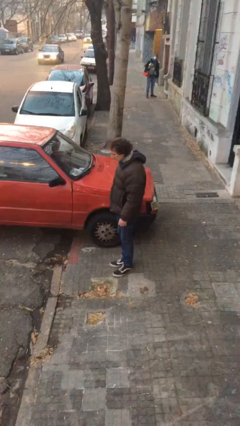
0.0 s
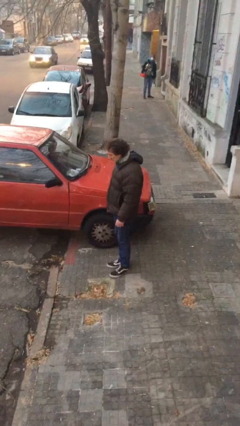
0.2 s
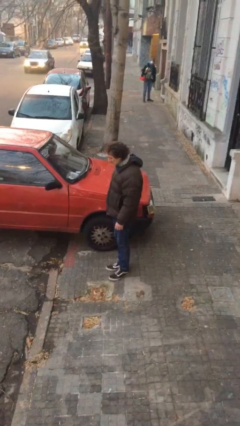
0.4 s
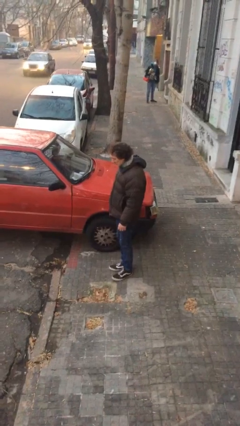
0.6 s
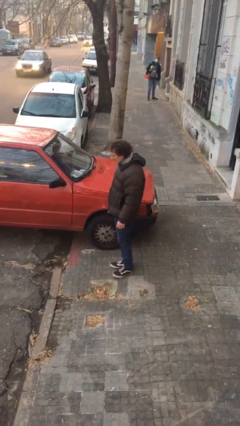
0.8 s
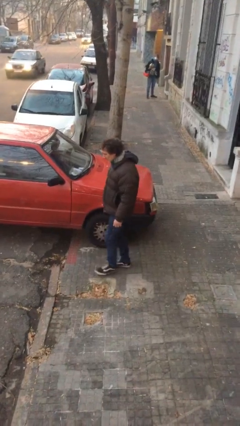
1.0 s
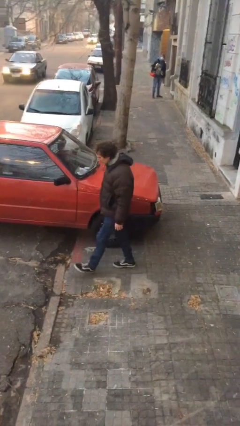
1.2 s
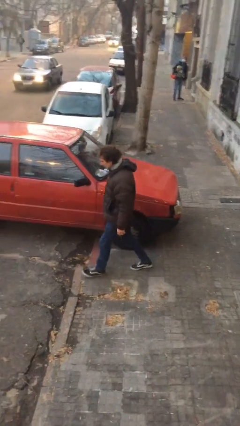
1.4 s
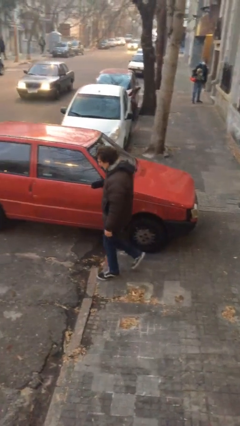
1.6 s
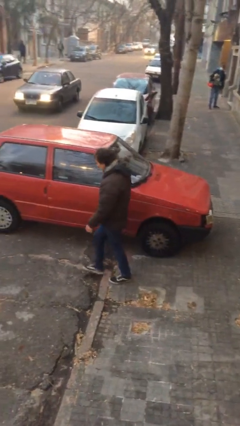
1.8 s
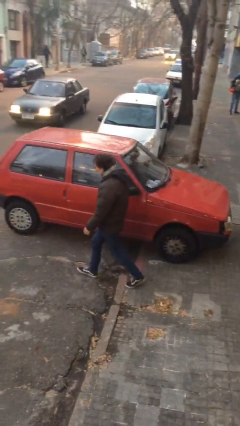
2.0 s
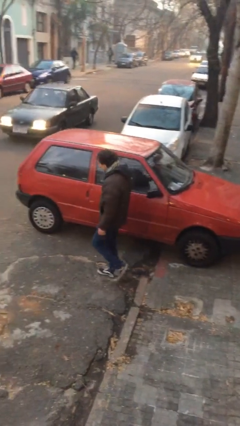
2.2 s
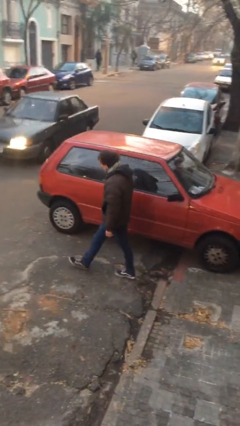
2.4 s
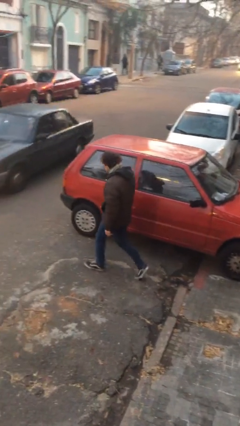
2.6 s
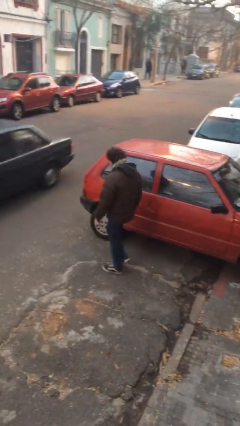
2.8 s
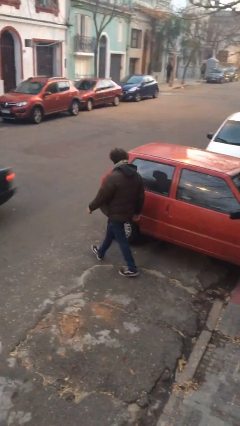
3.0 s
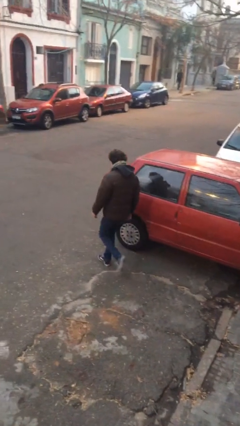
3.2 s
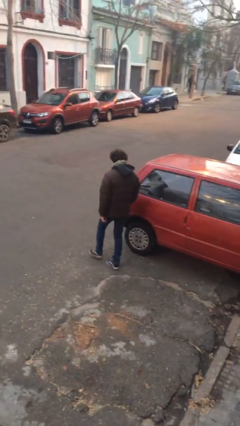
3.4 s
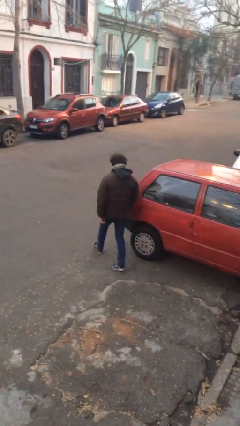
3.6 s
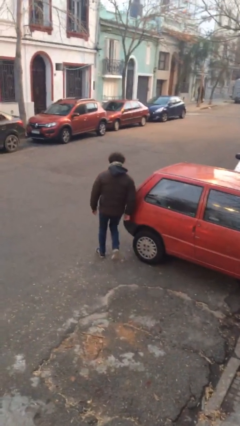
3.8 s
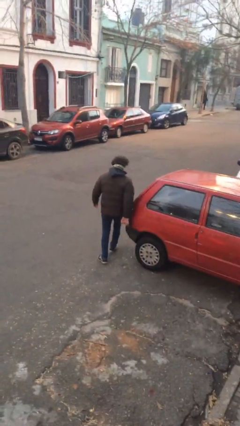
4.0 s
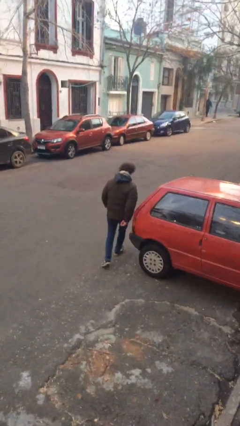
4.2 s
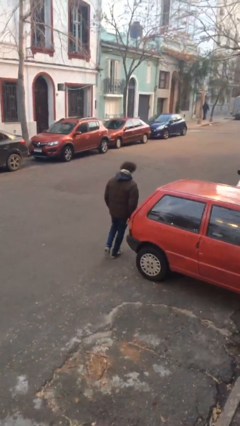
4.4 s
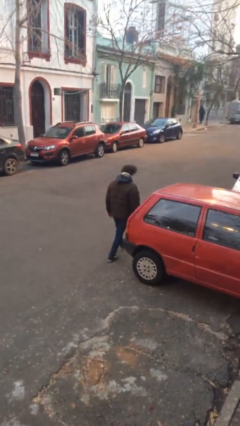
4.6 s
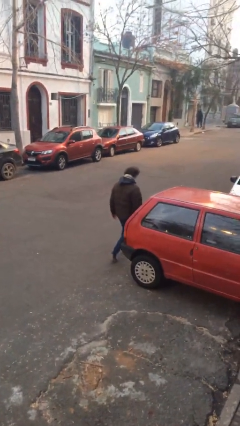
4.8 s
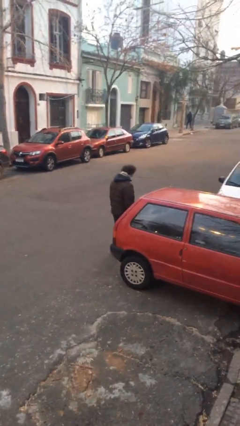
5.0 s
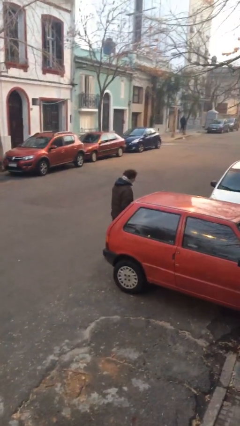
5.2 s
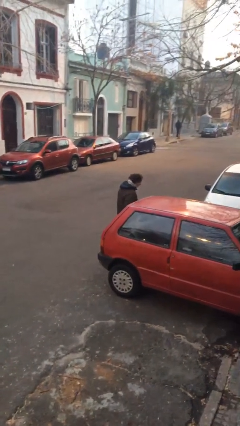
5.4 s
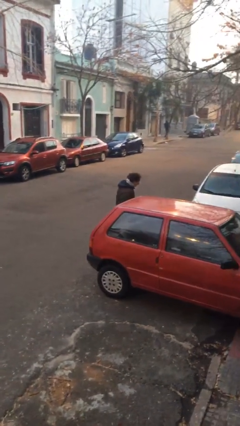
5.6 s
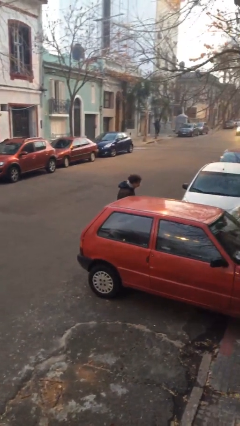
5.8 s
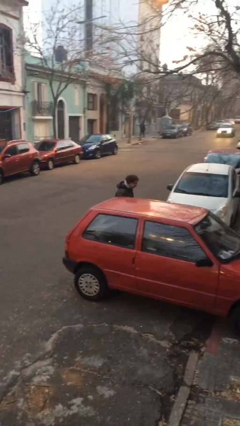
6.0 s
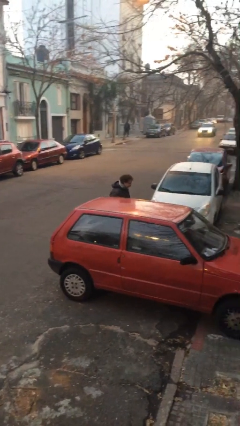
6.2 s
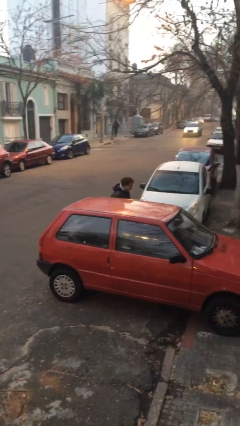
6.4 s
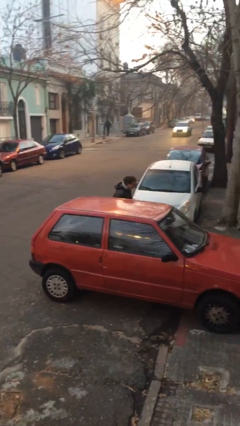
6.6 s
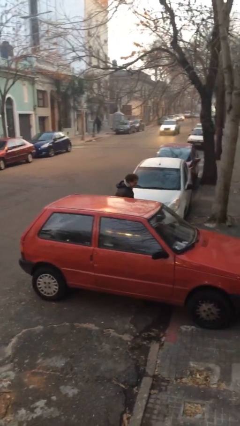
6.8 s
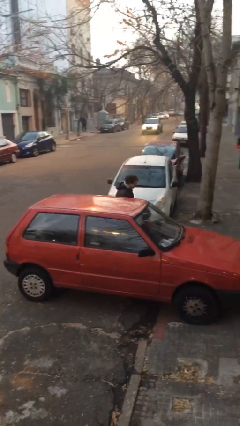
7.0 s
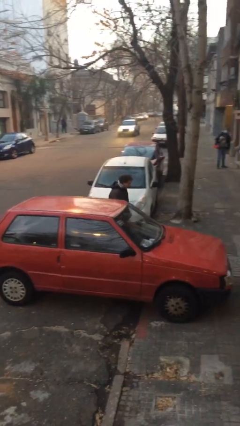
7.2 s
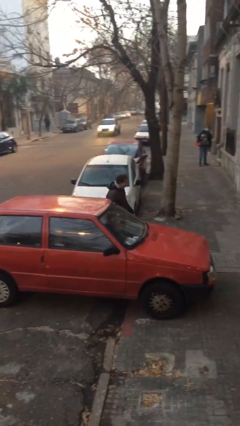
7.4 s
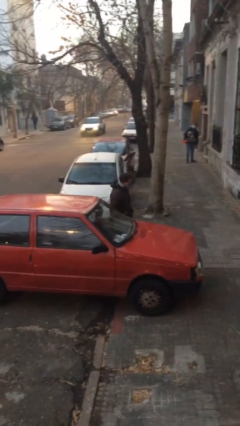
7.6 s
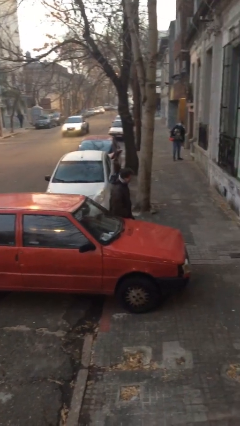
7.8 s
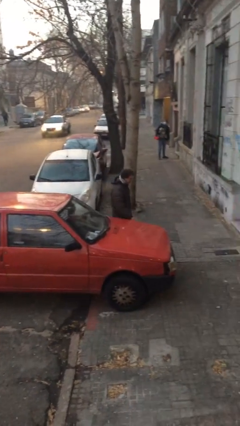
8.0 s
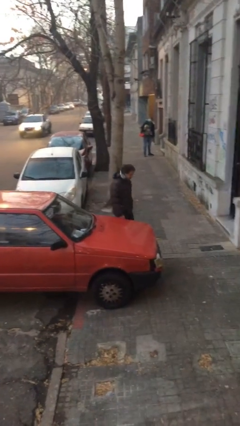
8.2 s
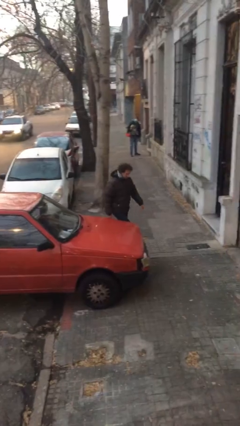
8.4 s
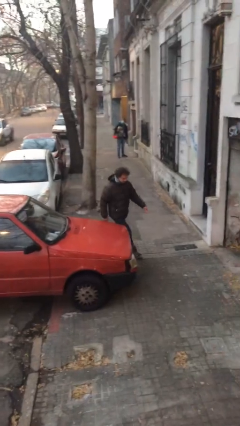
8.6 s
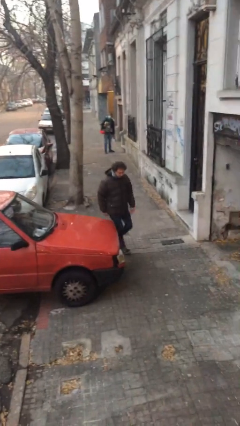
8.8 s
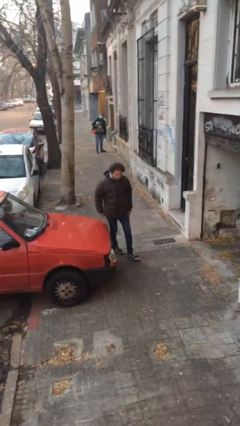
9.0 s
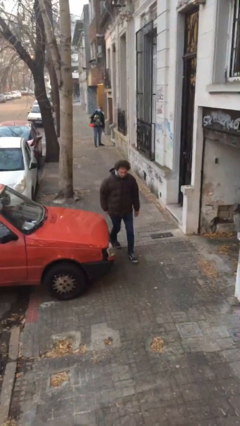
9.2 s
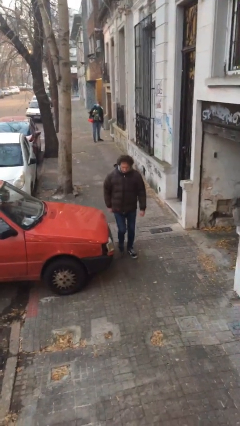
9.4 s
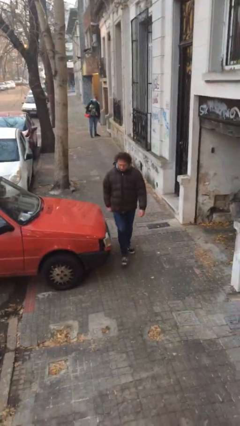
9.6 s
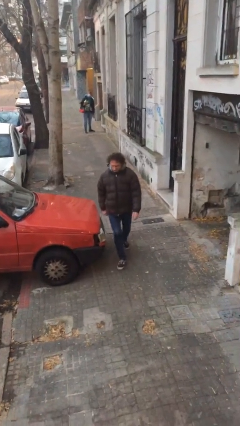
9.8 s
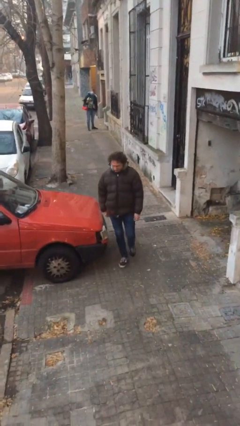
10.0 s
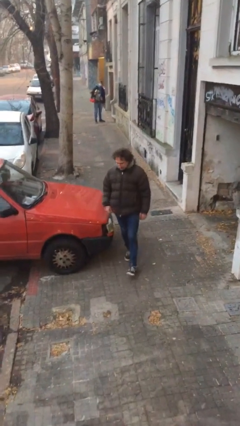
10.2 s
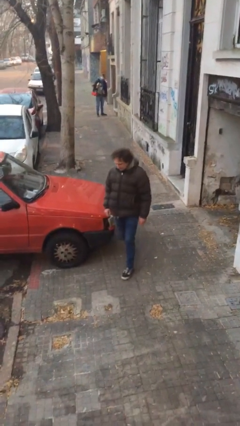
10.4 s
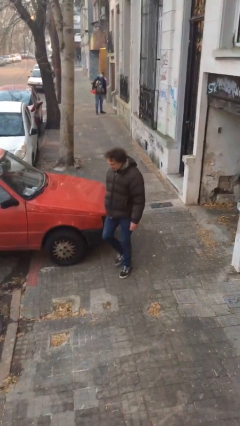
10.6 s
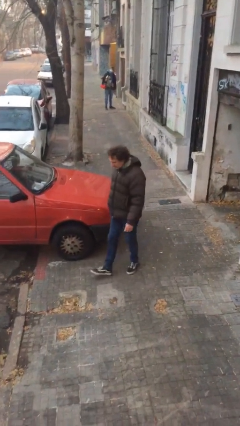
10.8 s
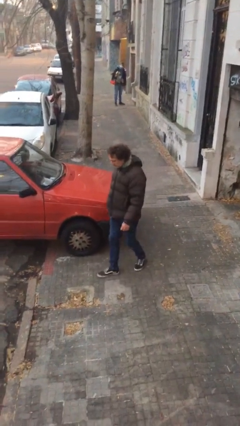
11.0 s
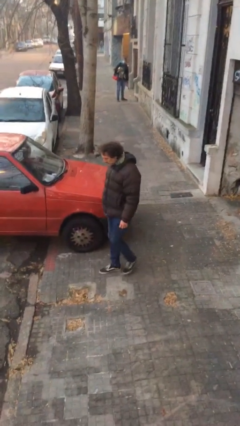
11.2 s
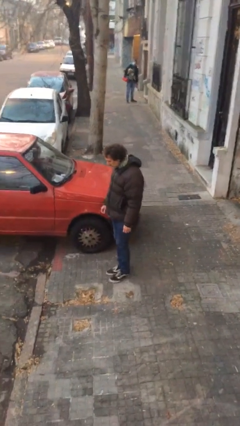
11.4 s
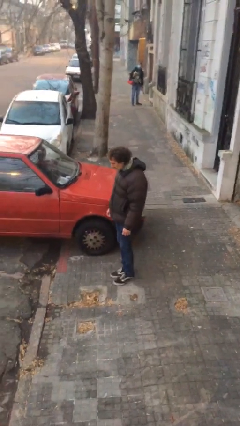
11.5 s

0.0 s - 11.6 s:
person walks around car

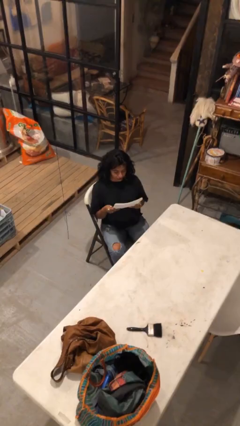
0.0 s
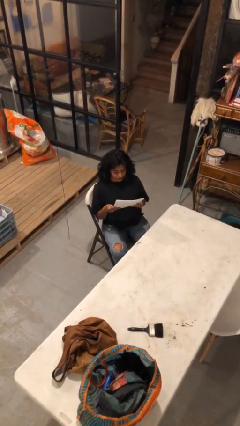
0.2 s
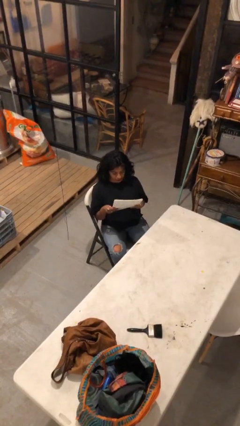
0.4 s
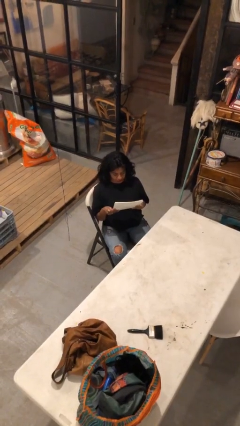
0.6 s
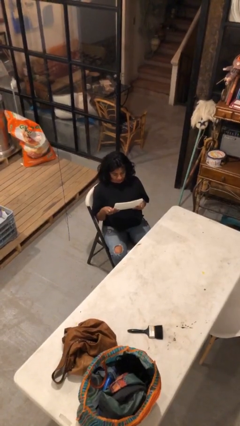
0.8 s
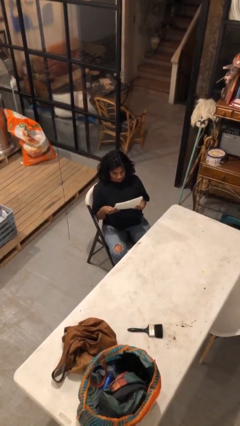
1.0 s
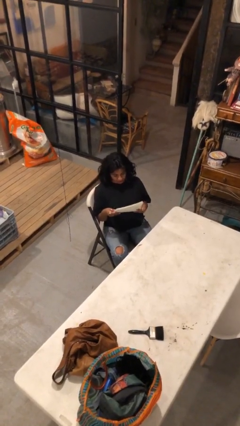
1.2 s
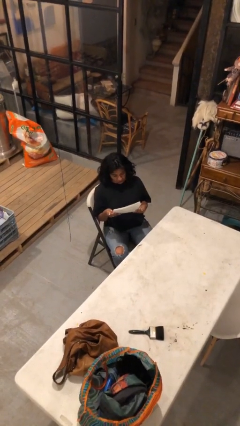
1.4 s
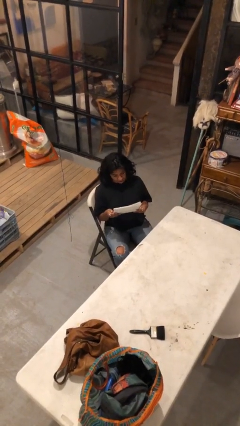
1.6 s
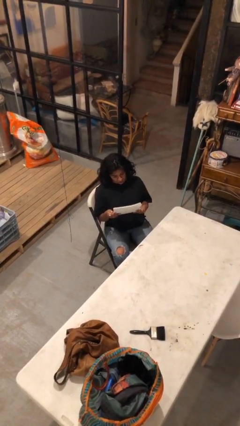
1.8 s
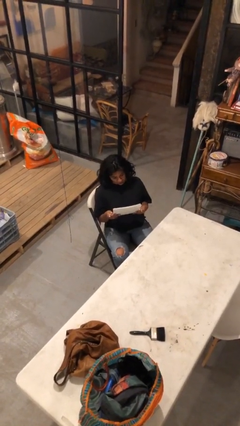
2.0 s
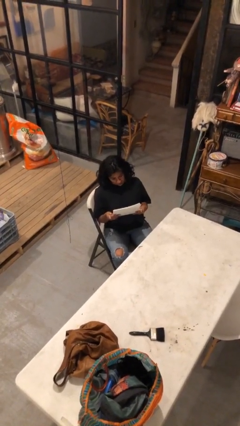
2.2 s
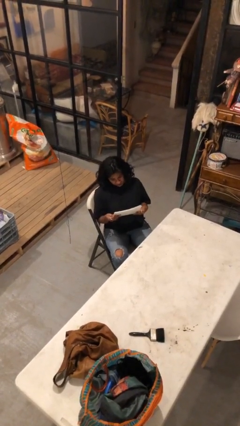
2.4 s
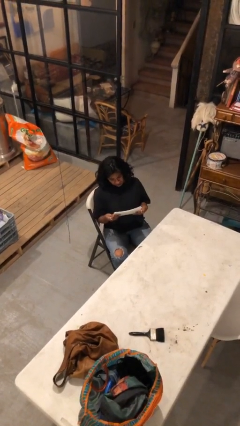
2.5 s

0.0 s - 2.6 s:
person reads document

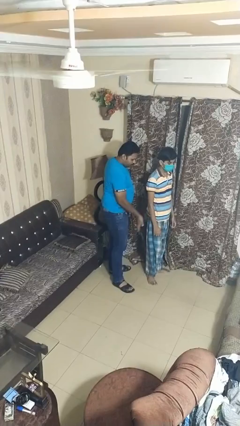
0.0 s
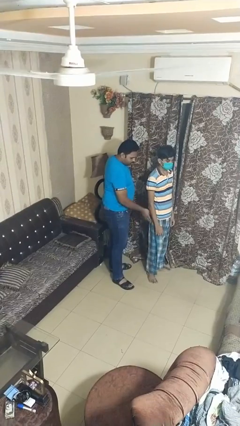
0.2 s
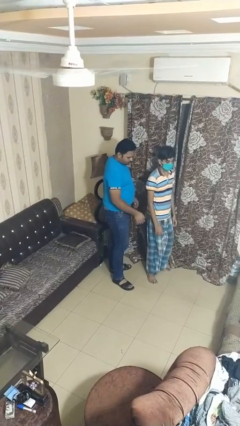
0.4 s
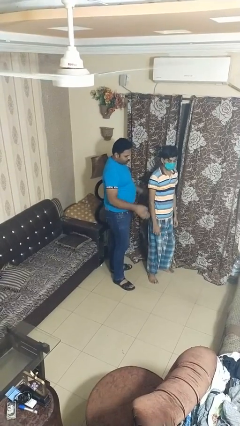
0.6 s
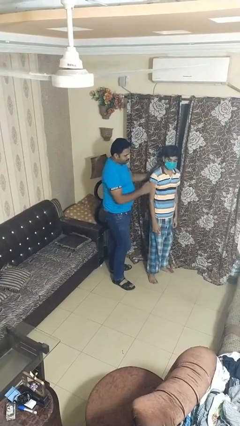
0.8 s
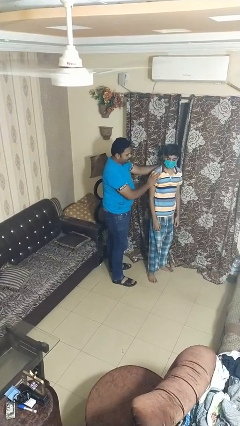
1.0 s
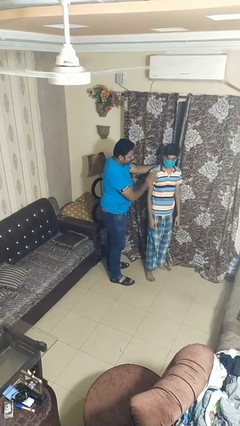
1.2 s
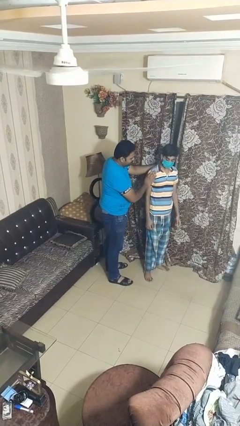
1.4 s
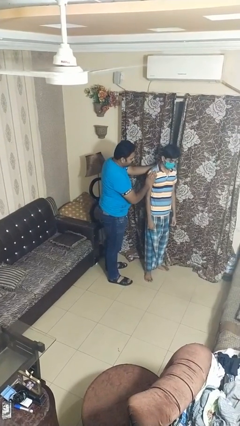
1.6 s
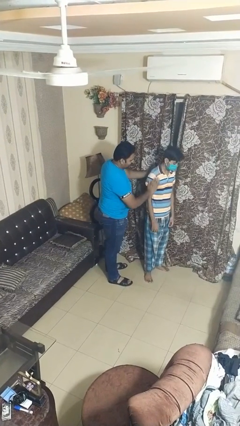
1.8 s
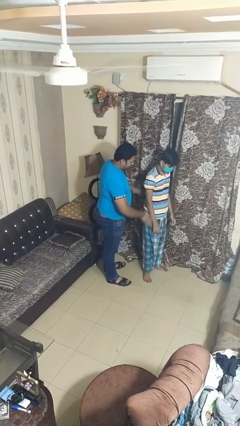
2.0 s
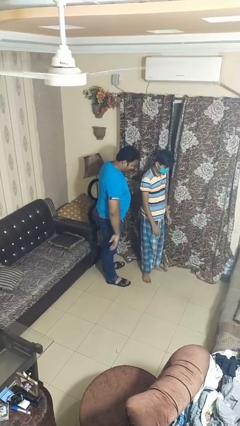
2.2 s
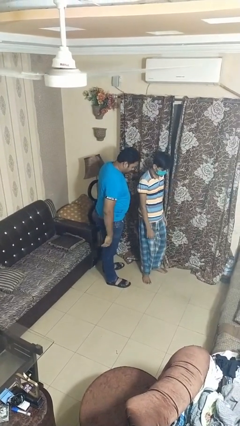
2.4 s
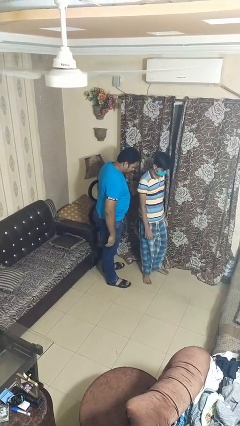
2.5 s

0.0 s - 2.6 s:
person bumps into person

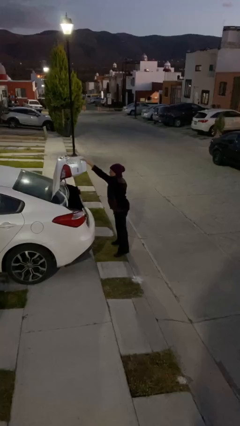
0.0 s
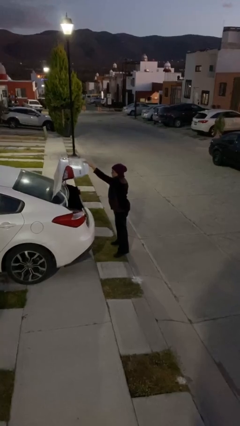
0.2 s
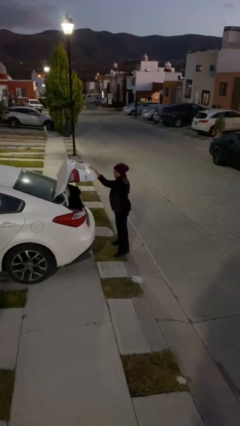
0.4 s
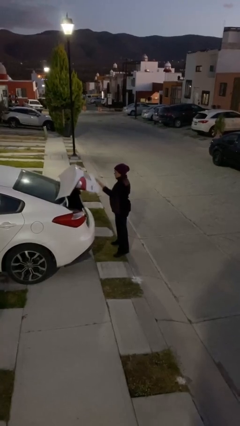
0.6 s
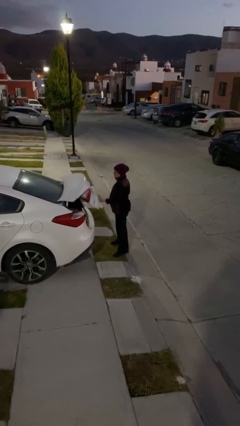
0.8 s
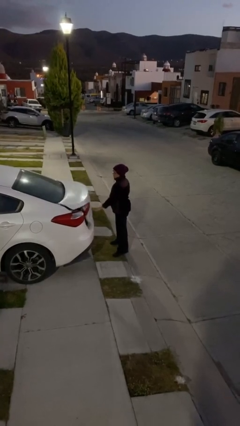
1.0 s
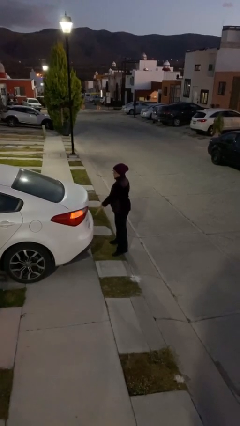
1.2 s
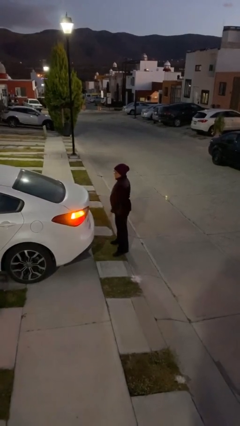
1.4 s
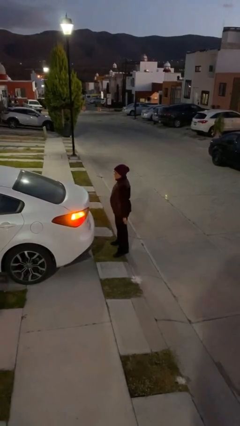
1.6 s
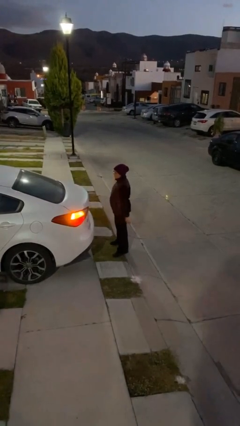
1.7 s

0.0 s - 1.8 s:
person closes car trunk
